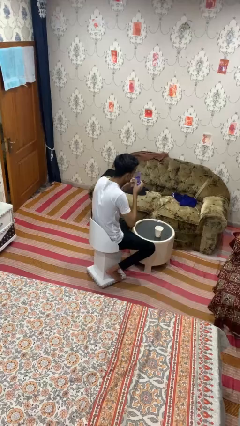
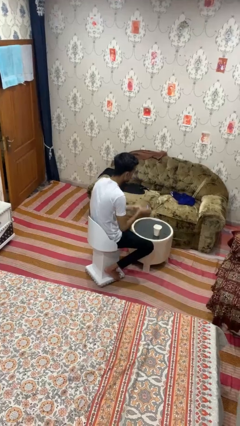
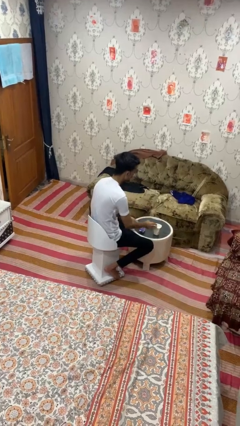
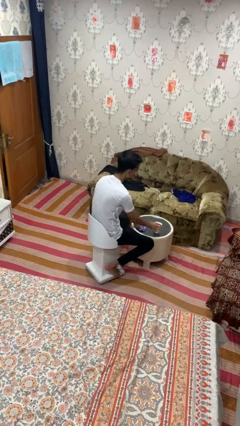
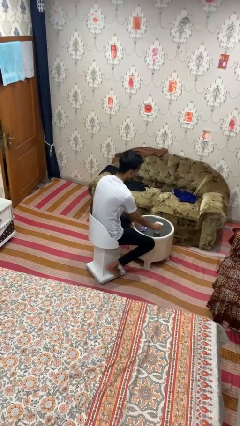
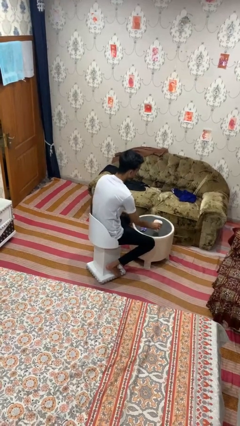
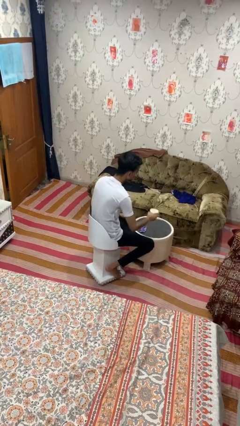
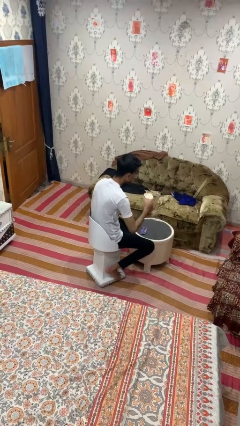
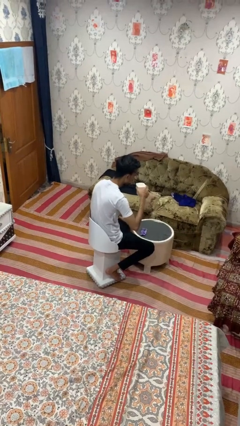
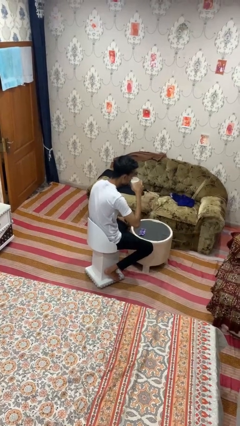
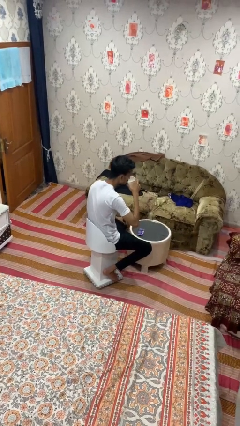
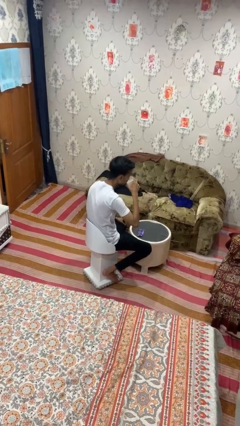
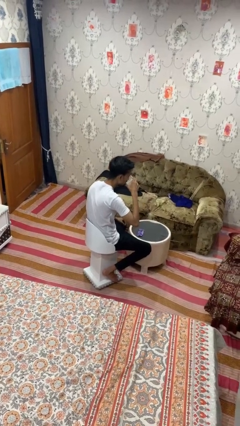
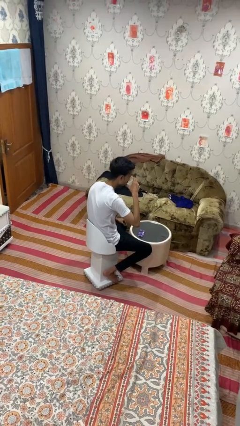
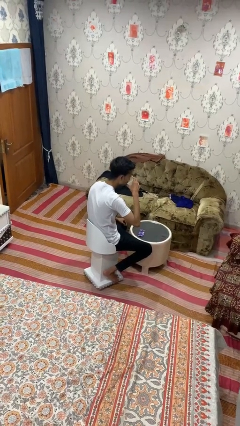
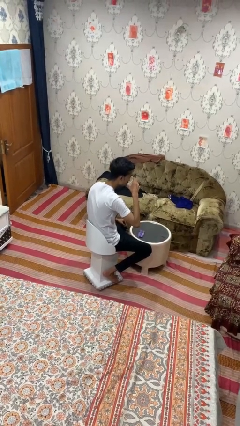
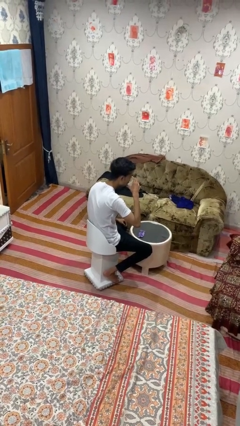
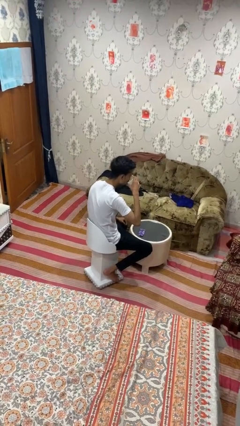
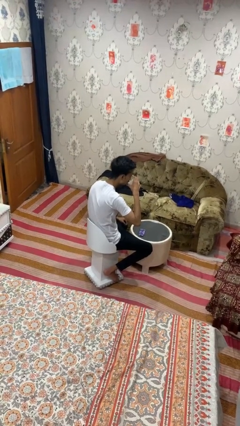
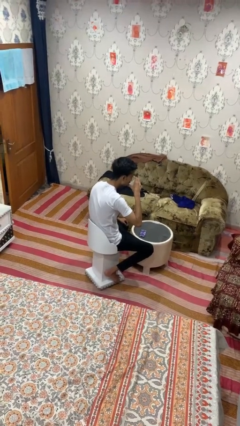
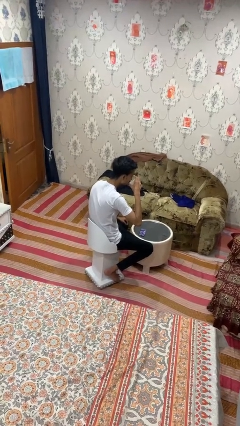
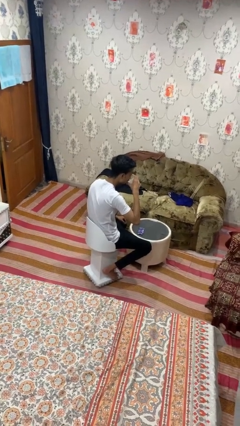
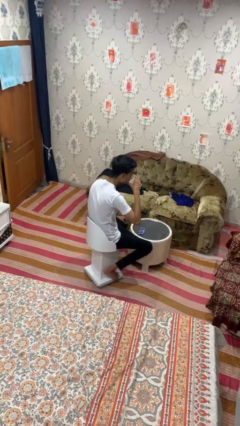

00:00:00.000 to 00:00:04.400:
person drinks from cup

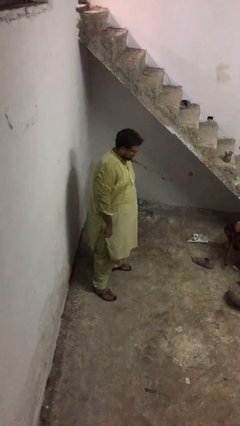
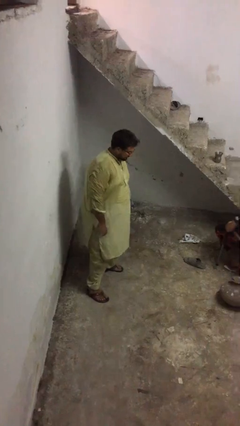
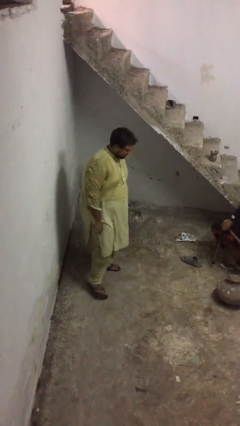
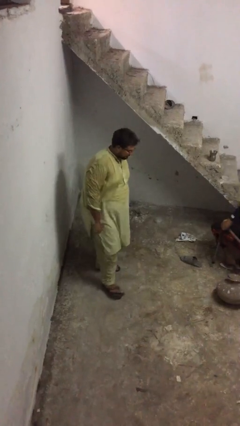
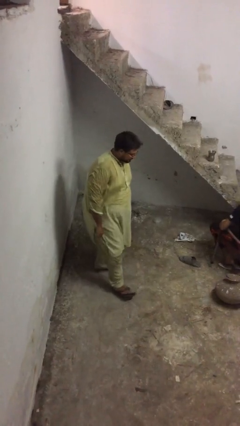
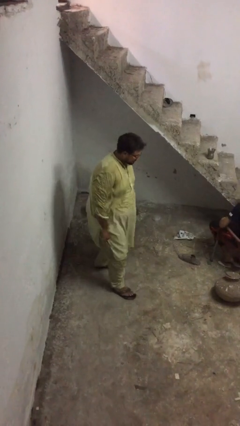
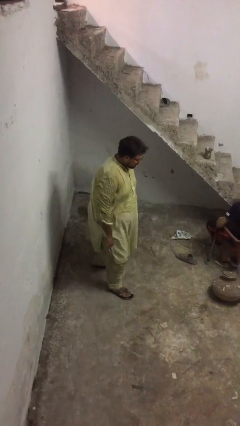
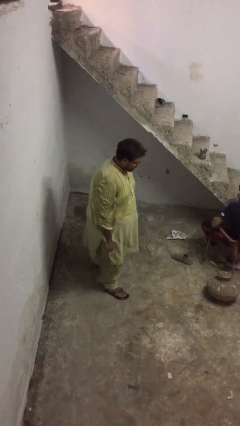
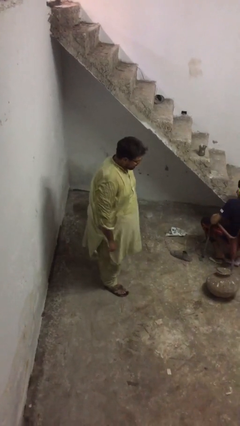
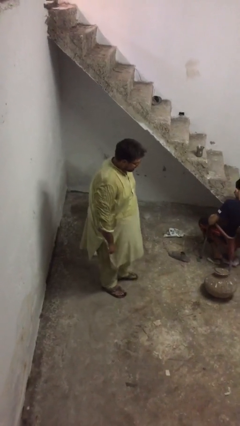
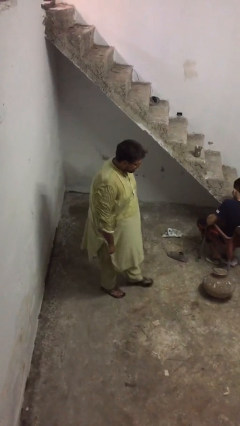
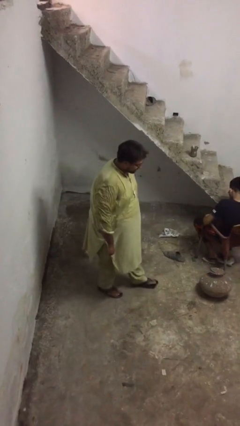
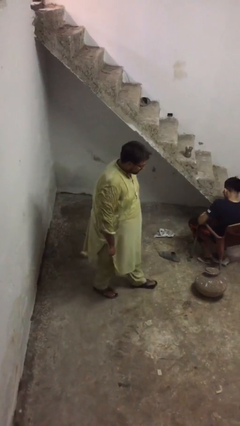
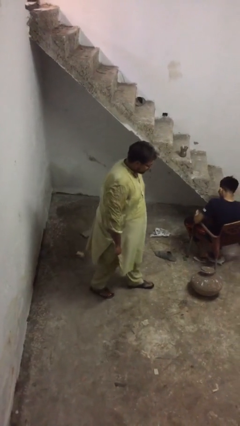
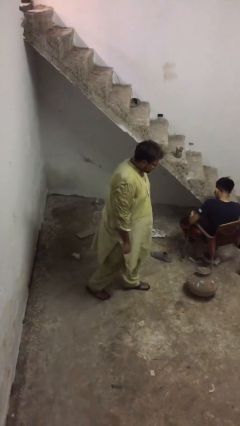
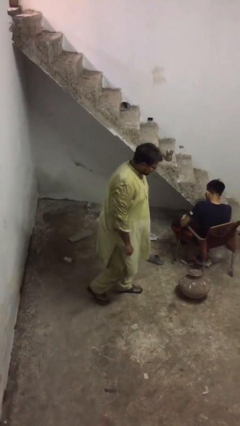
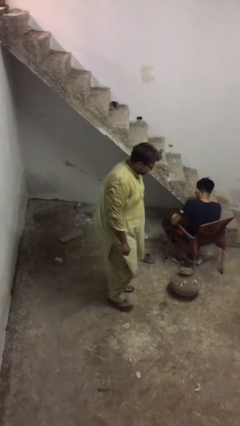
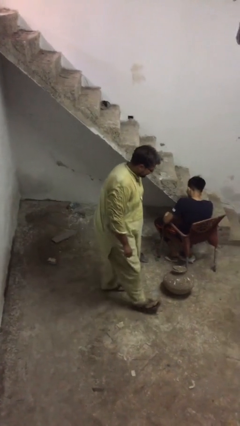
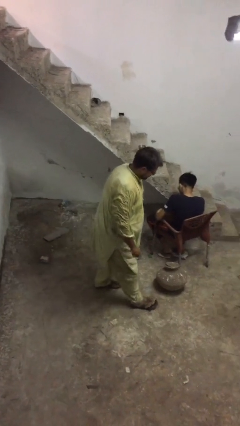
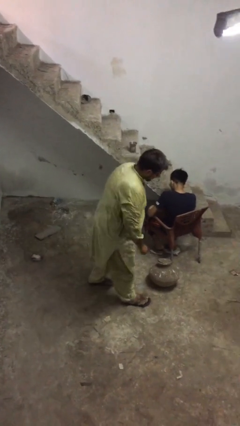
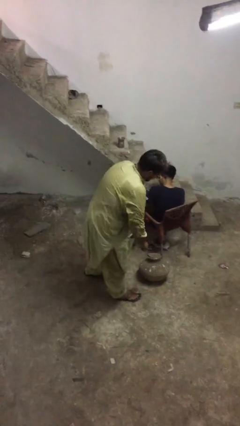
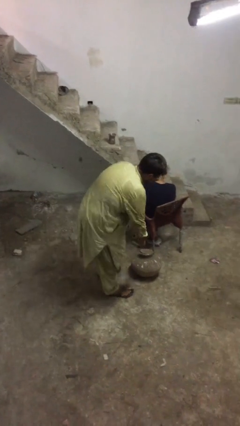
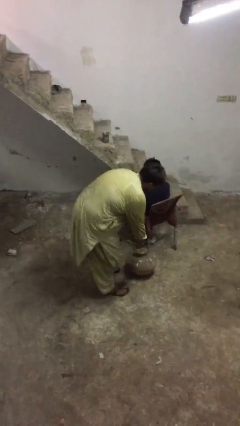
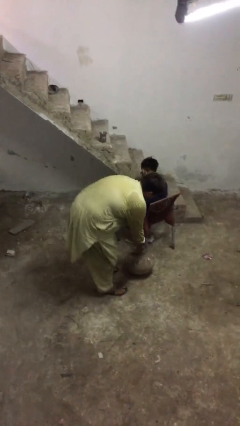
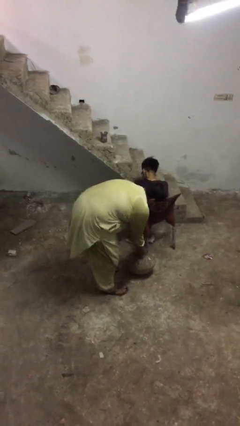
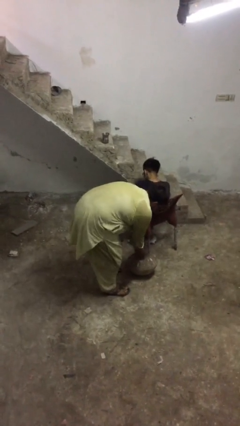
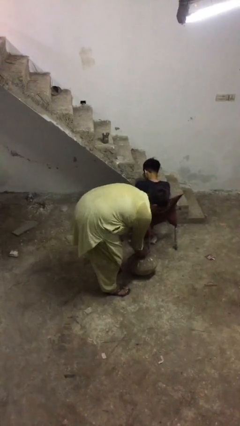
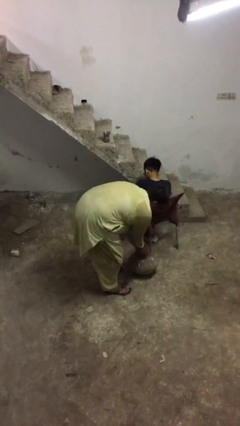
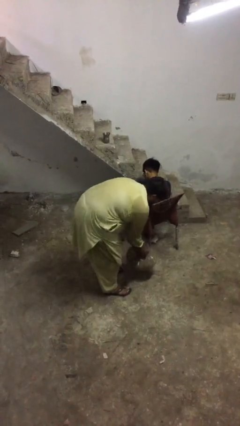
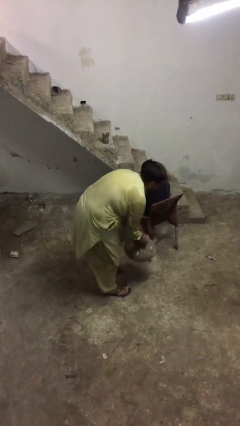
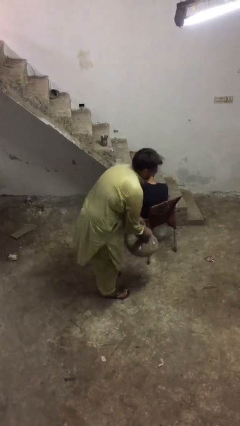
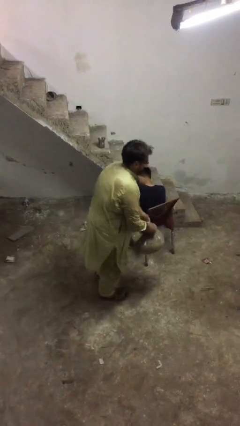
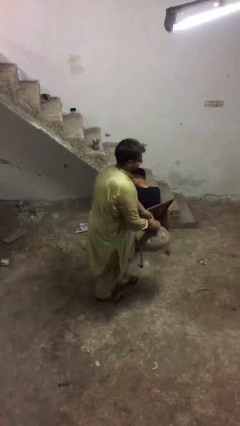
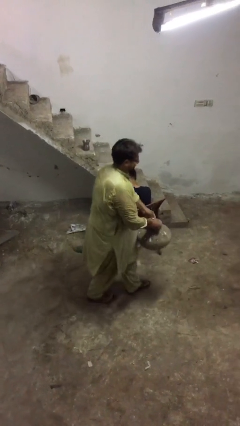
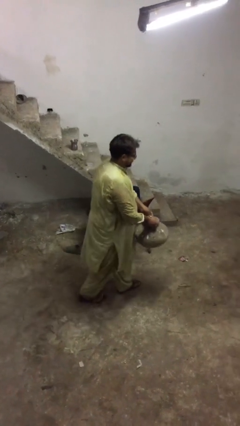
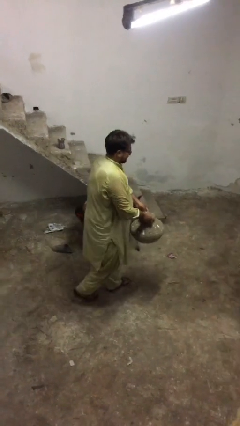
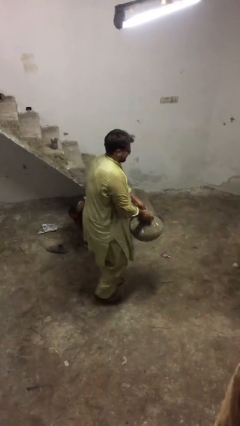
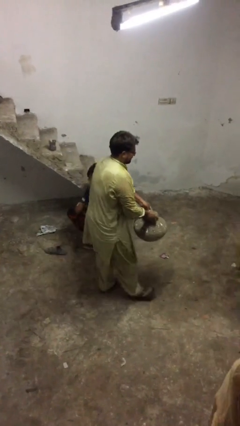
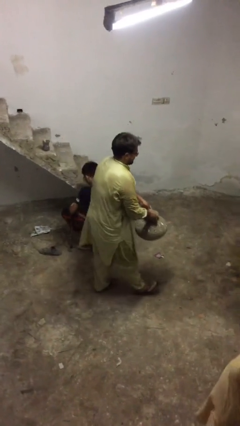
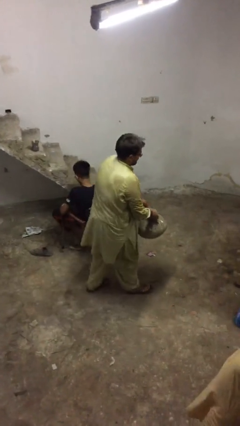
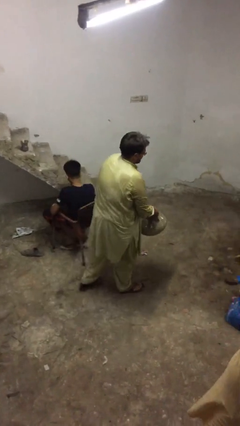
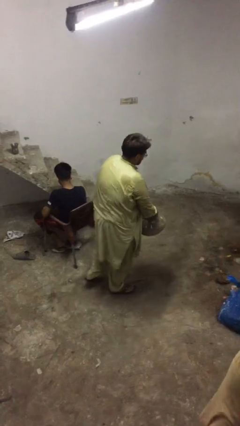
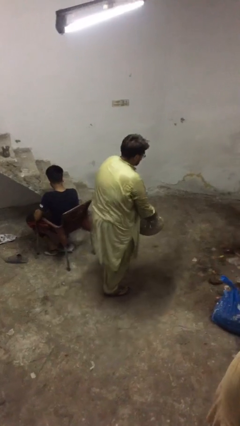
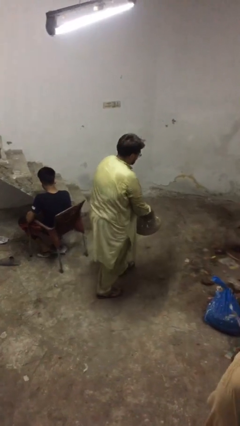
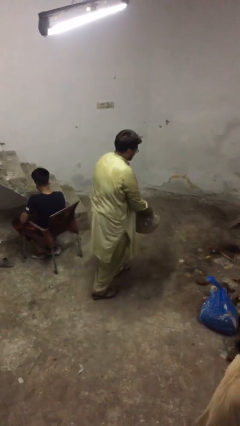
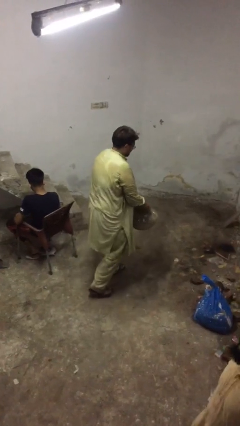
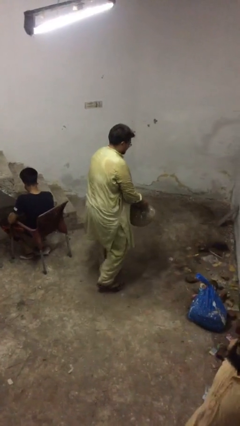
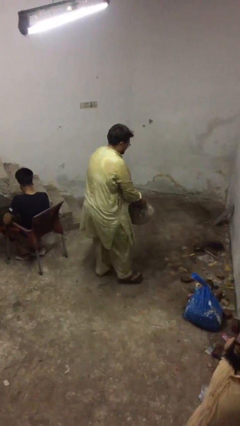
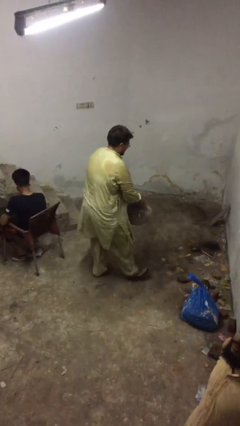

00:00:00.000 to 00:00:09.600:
person steals object from person

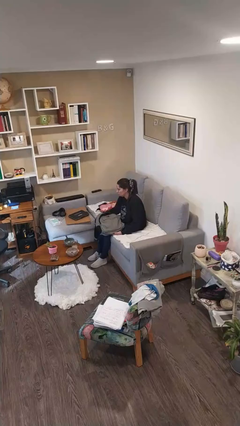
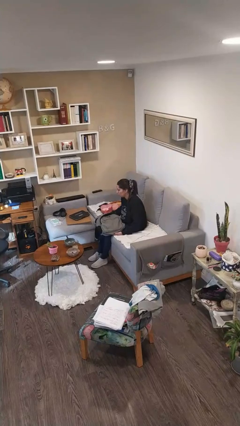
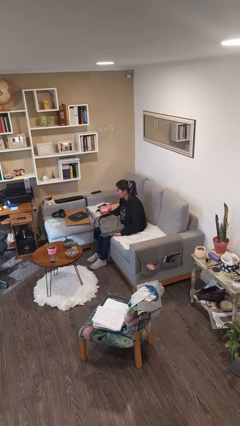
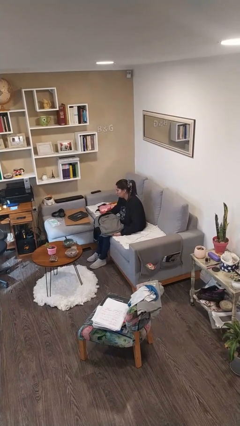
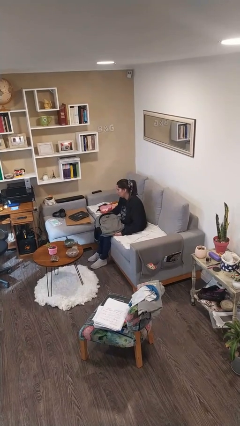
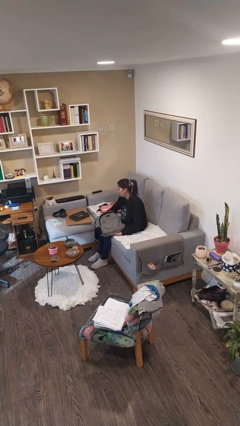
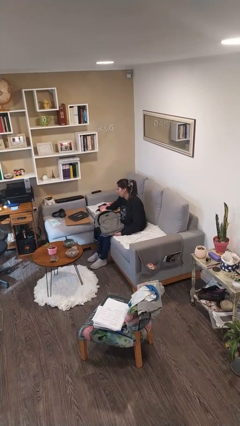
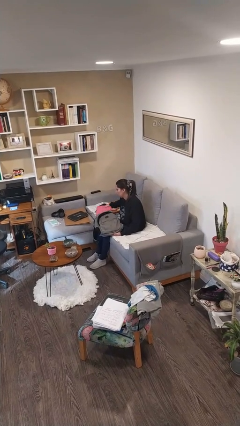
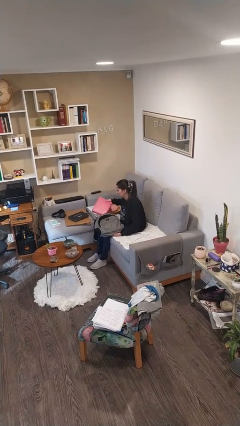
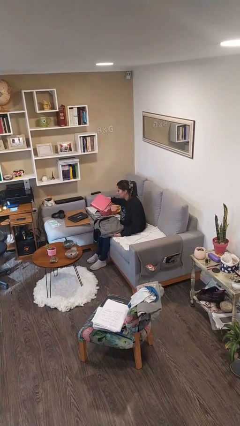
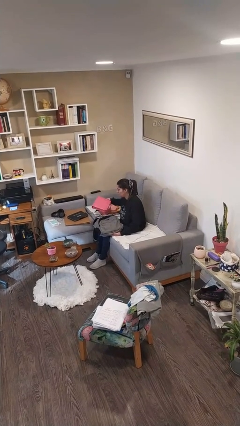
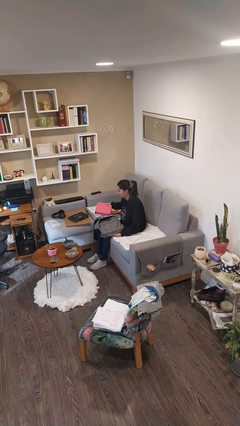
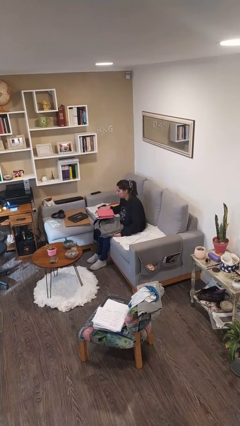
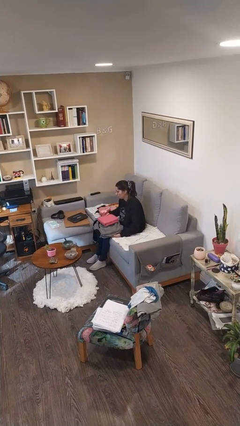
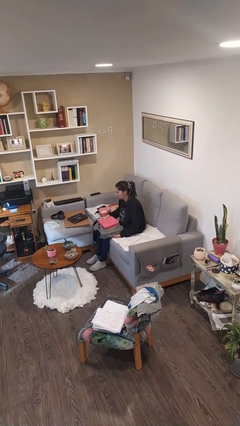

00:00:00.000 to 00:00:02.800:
person takes object from backpack

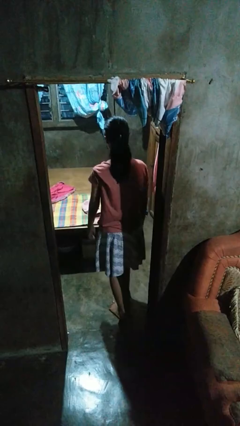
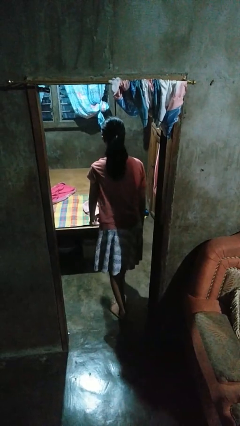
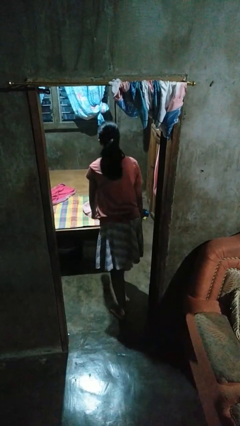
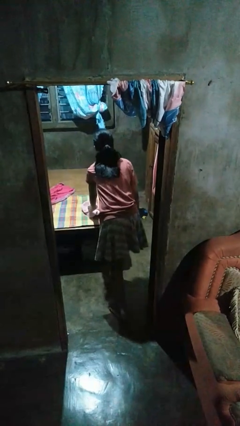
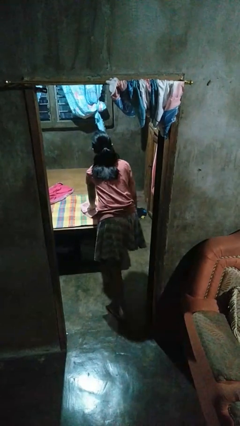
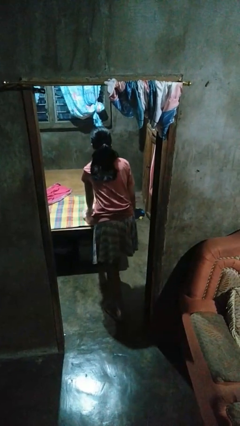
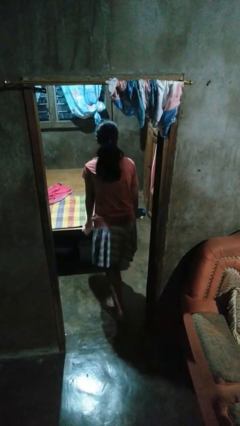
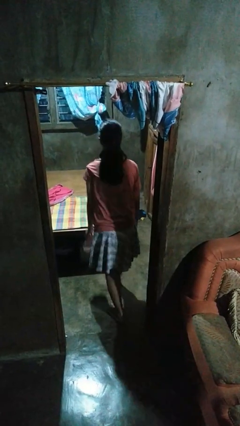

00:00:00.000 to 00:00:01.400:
person picks up object from bed
